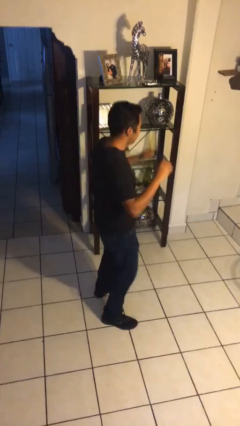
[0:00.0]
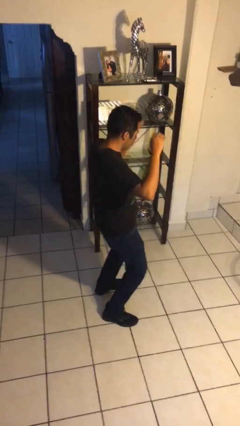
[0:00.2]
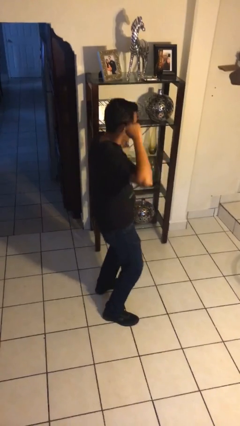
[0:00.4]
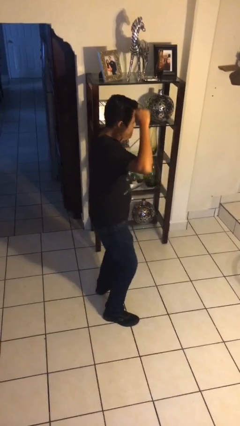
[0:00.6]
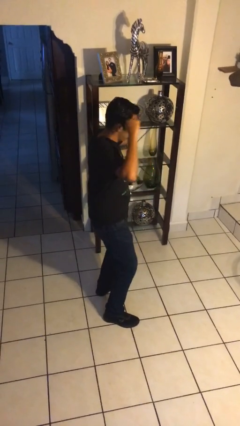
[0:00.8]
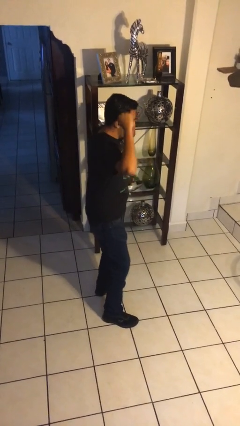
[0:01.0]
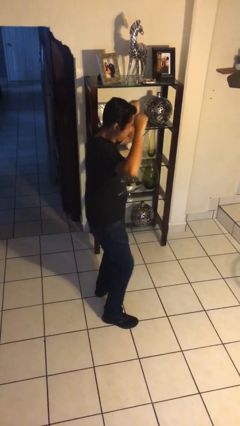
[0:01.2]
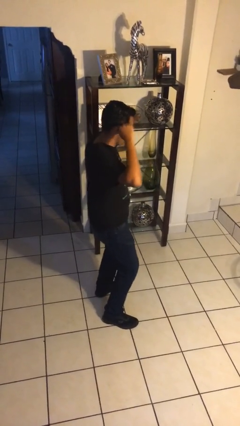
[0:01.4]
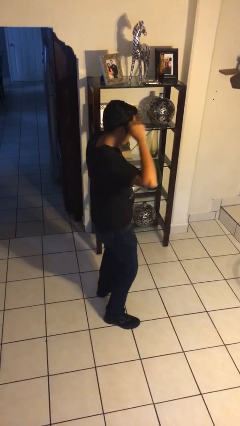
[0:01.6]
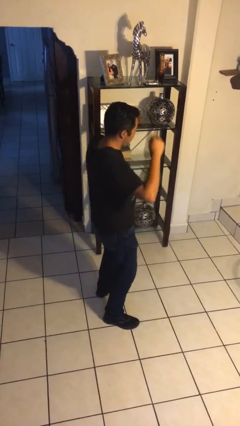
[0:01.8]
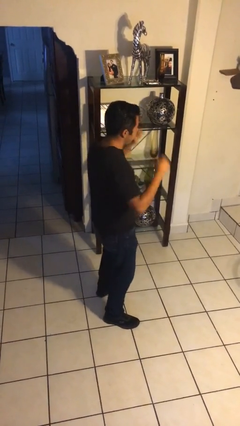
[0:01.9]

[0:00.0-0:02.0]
person dances in place

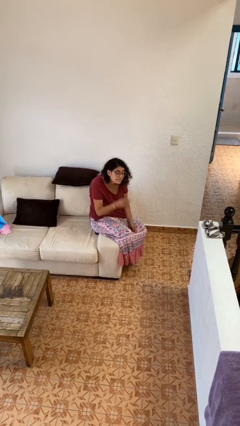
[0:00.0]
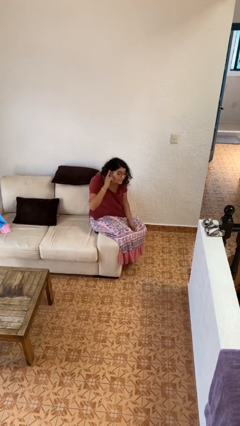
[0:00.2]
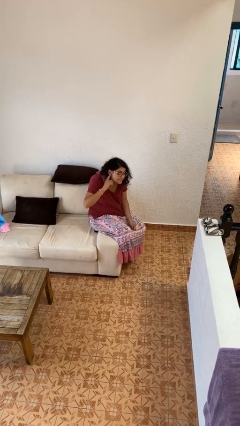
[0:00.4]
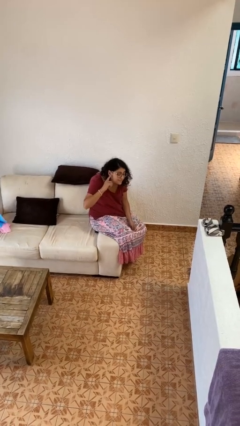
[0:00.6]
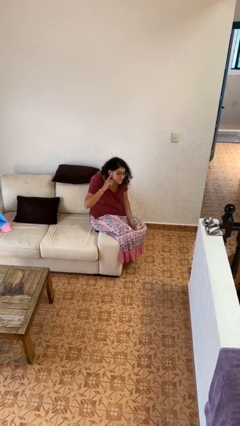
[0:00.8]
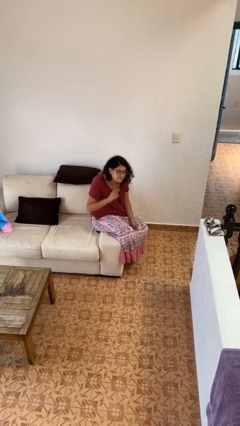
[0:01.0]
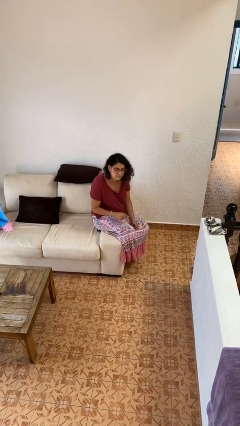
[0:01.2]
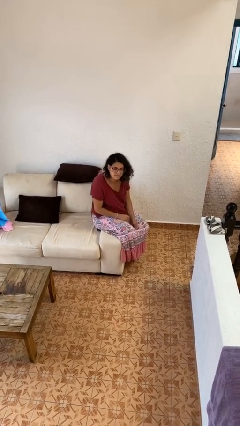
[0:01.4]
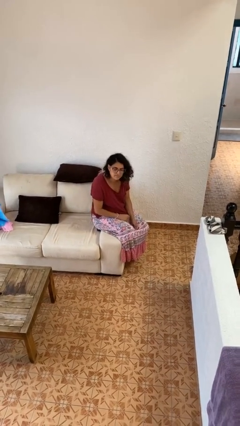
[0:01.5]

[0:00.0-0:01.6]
person gestures listen closely

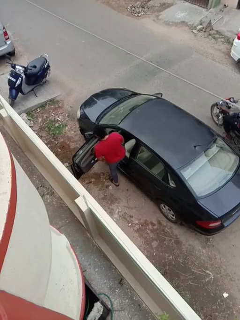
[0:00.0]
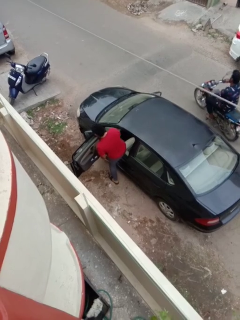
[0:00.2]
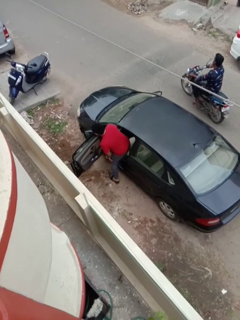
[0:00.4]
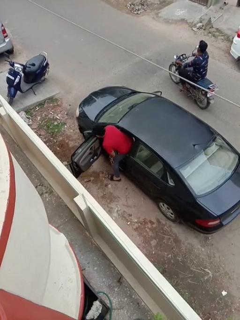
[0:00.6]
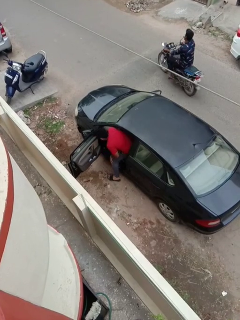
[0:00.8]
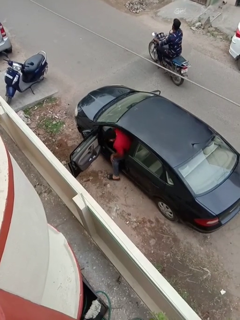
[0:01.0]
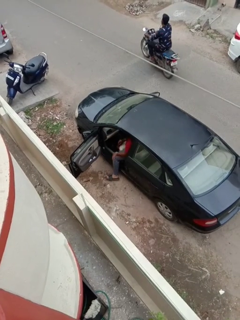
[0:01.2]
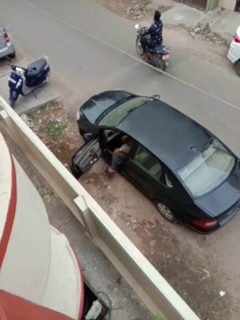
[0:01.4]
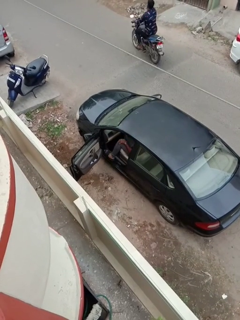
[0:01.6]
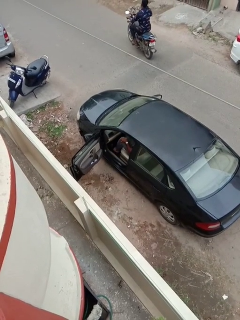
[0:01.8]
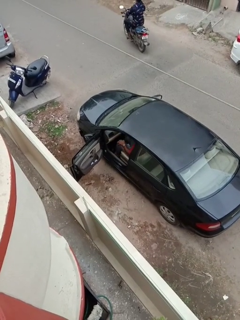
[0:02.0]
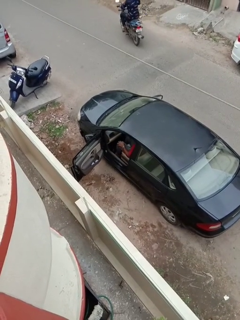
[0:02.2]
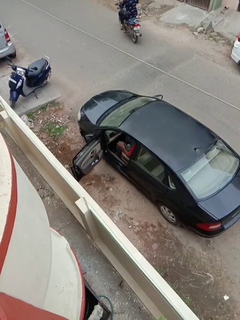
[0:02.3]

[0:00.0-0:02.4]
person enters car

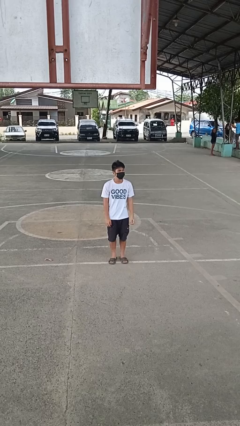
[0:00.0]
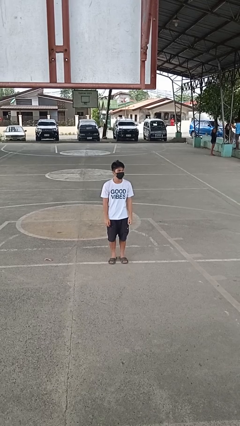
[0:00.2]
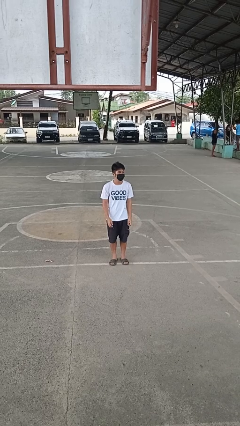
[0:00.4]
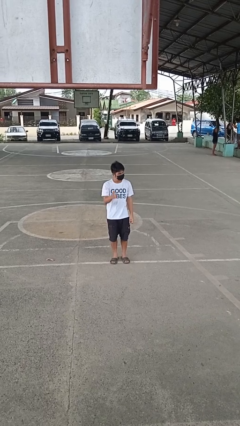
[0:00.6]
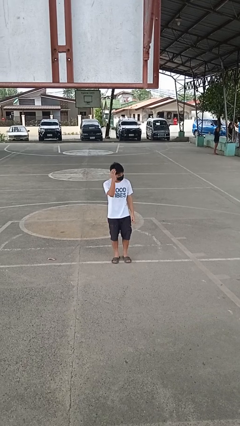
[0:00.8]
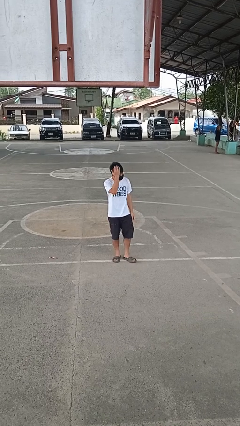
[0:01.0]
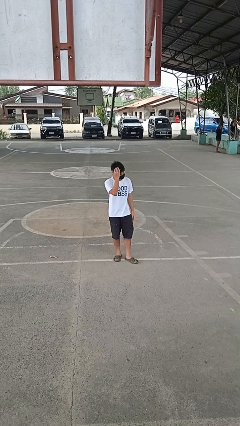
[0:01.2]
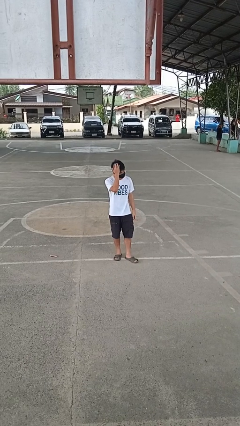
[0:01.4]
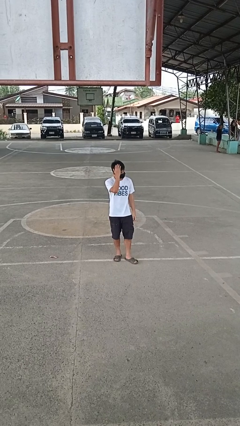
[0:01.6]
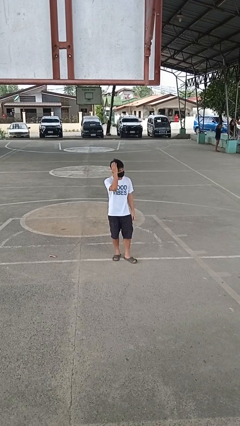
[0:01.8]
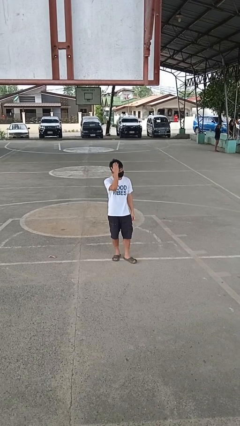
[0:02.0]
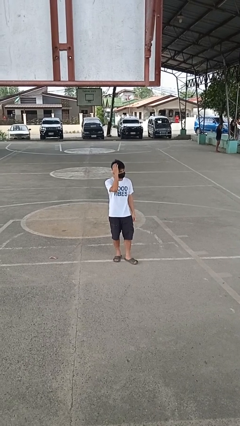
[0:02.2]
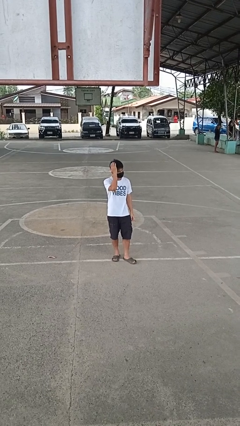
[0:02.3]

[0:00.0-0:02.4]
person pats head

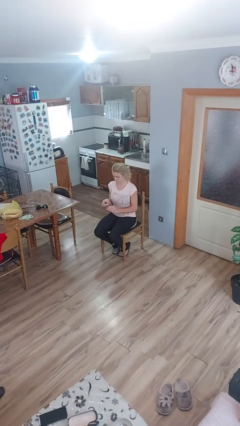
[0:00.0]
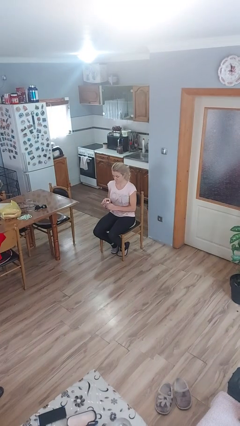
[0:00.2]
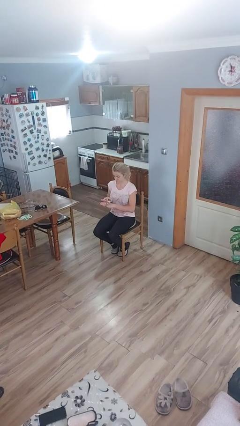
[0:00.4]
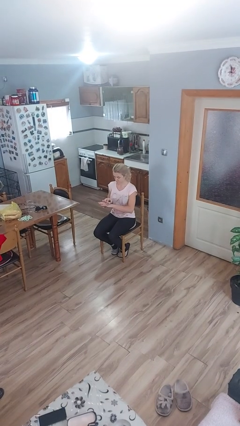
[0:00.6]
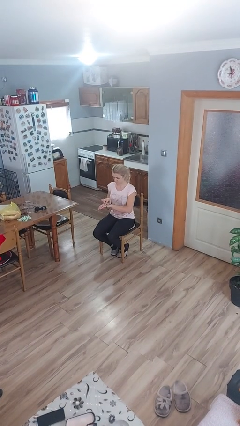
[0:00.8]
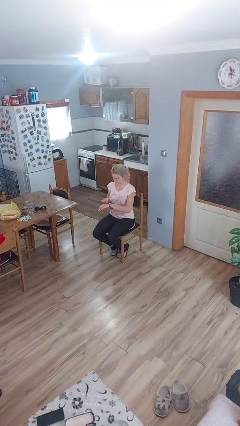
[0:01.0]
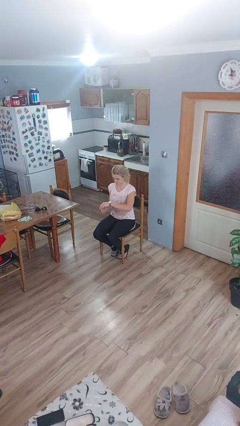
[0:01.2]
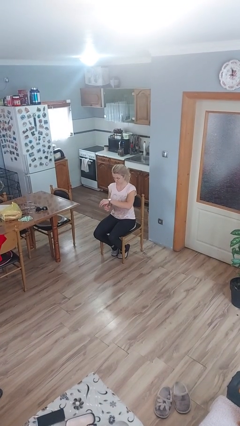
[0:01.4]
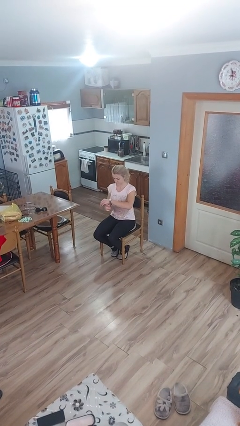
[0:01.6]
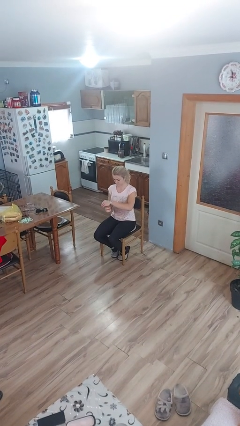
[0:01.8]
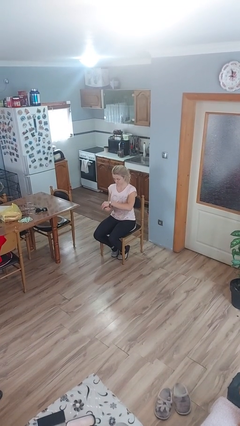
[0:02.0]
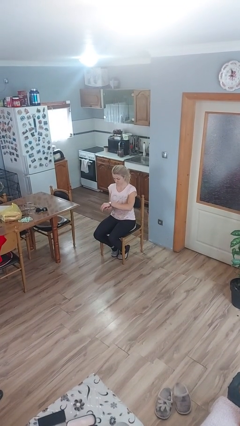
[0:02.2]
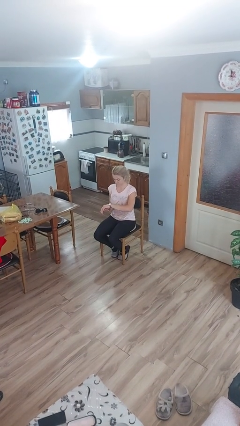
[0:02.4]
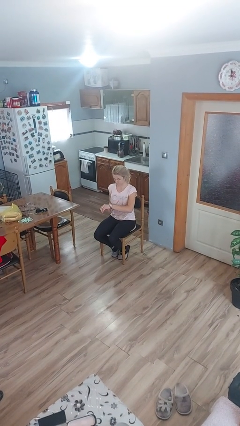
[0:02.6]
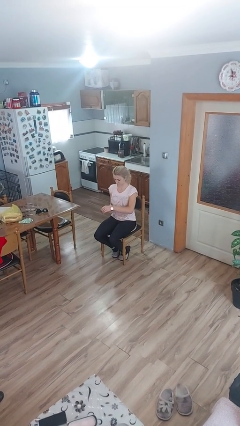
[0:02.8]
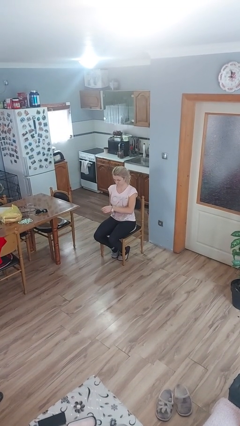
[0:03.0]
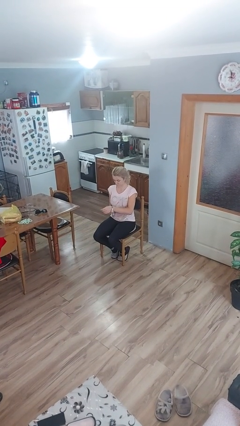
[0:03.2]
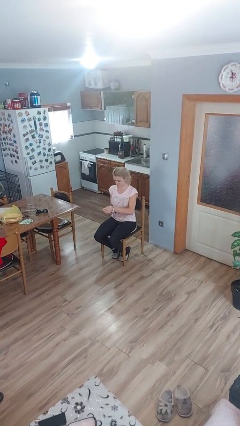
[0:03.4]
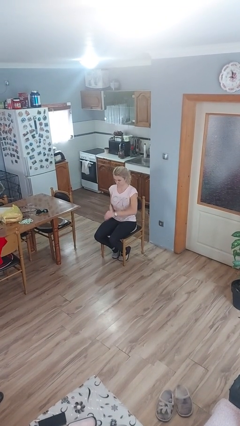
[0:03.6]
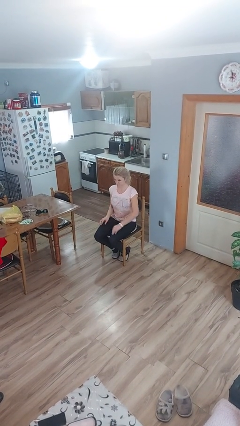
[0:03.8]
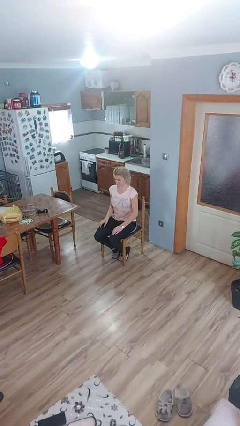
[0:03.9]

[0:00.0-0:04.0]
person puts on wristwatch

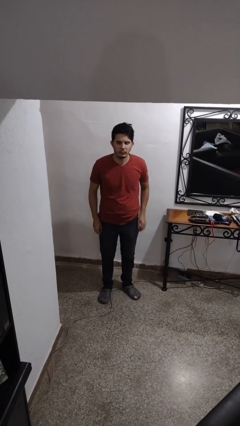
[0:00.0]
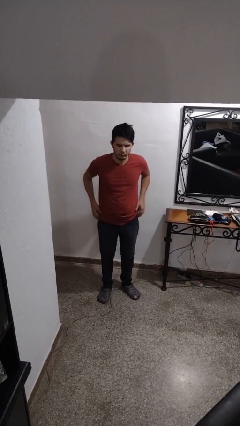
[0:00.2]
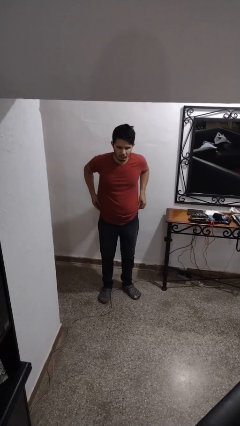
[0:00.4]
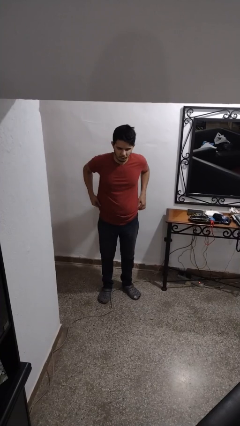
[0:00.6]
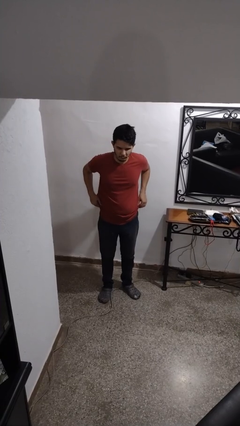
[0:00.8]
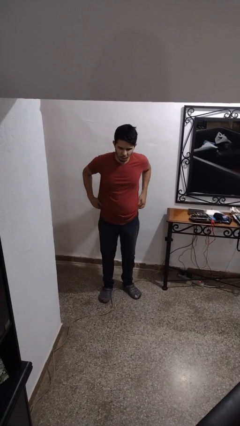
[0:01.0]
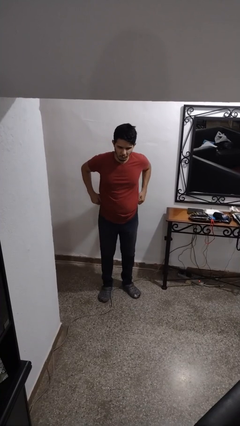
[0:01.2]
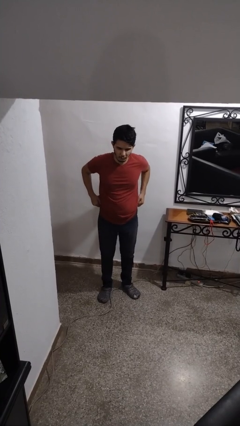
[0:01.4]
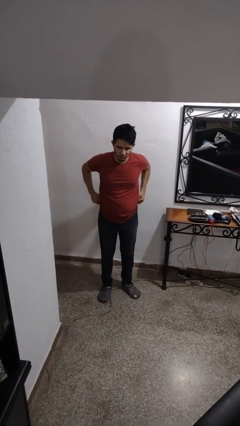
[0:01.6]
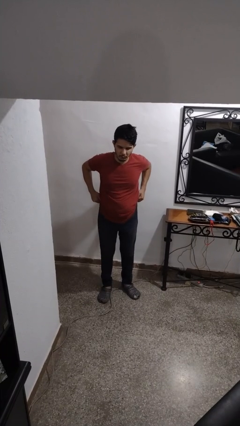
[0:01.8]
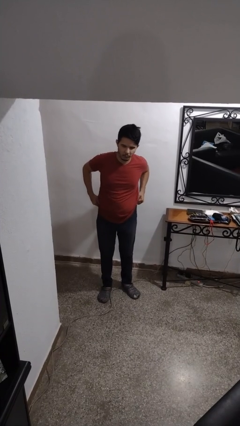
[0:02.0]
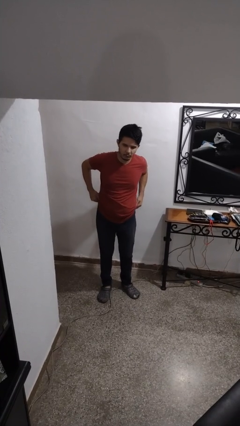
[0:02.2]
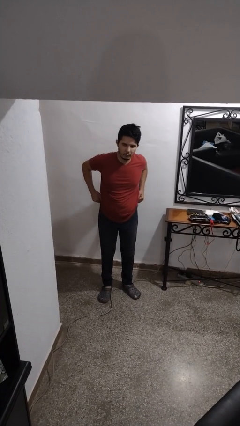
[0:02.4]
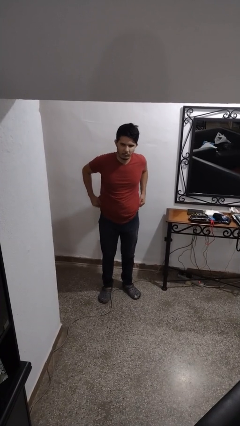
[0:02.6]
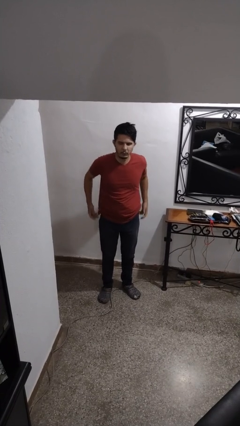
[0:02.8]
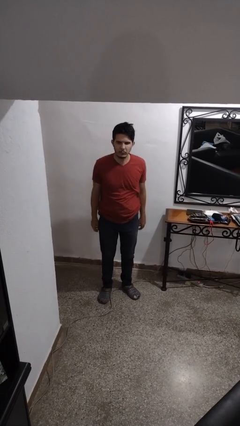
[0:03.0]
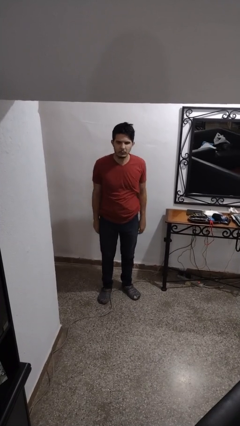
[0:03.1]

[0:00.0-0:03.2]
person hikes up pants

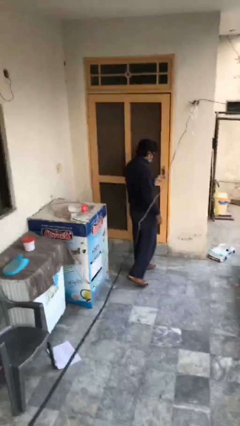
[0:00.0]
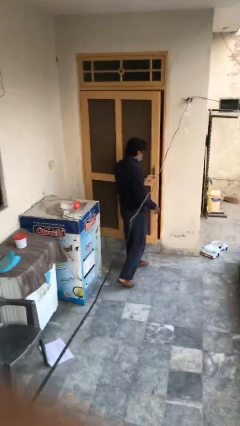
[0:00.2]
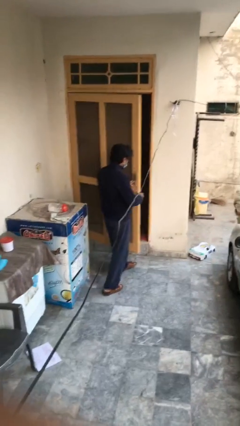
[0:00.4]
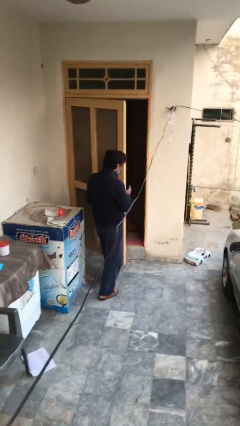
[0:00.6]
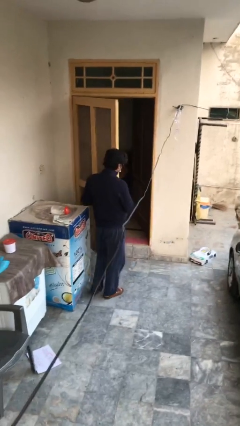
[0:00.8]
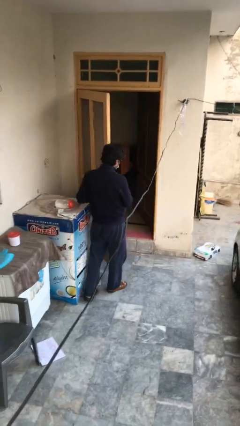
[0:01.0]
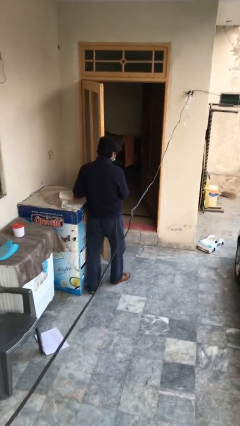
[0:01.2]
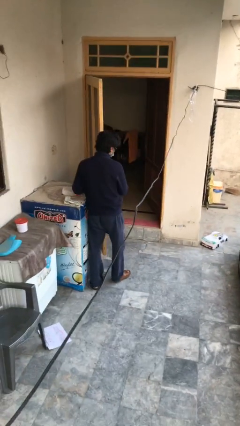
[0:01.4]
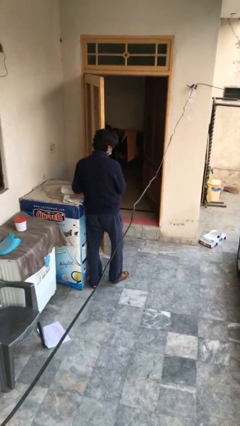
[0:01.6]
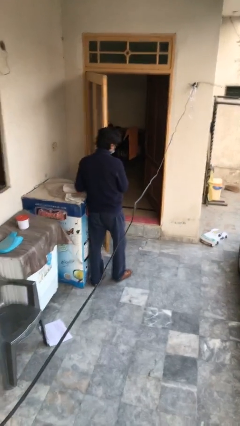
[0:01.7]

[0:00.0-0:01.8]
person opens facility door

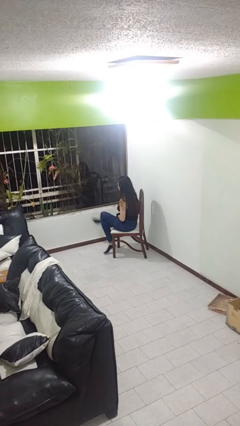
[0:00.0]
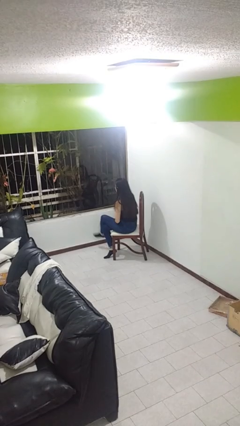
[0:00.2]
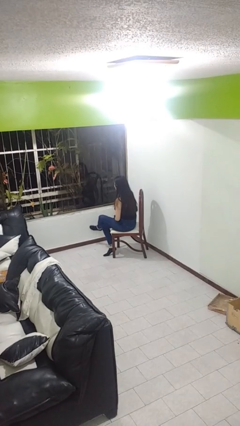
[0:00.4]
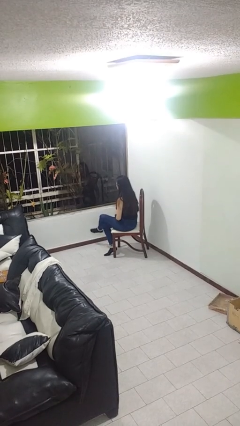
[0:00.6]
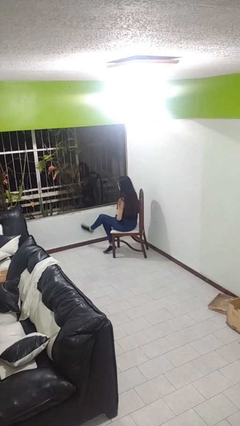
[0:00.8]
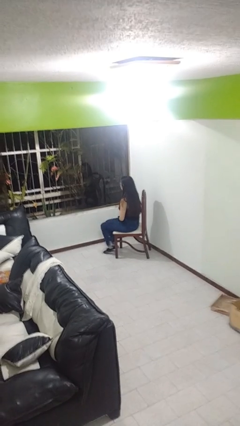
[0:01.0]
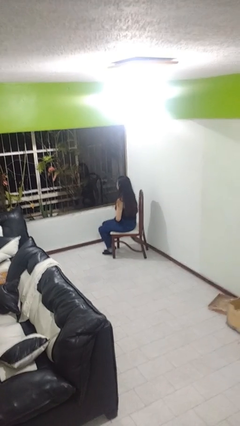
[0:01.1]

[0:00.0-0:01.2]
person crosses legs
